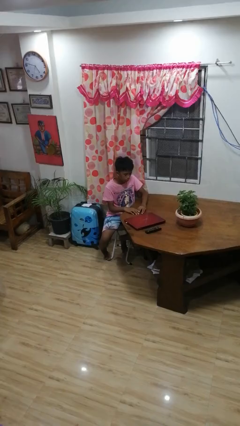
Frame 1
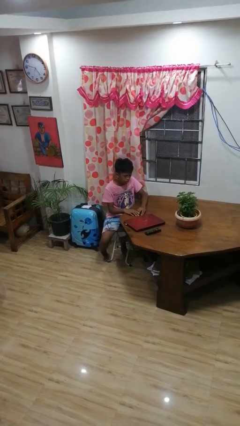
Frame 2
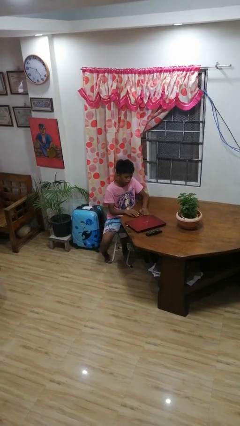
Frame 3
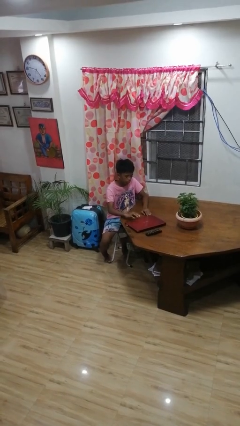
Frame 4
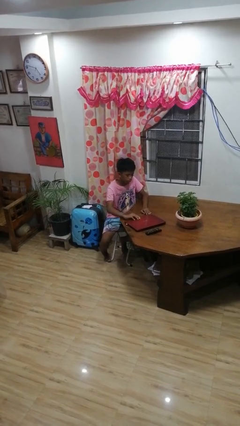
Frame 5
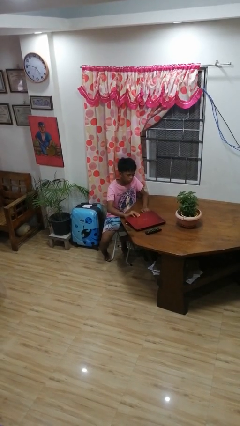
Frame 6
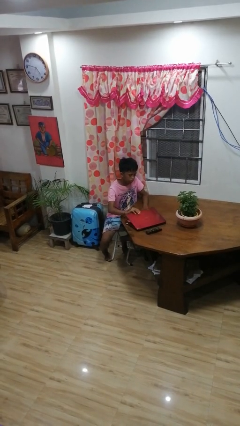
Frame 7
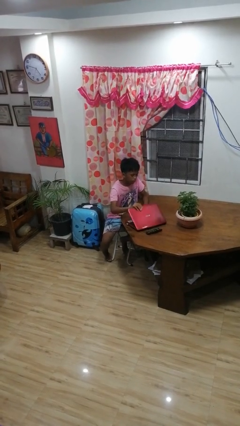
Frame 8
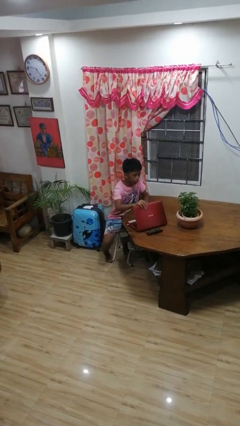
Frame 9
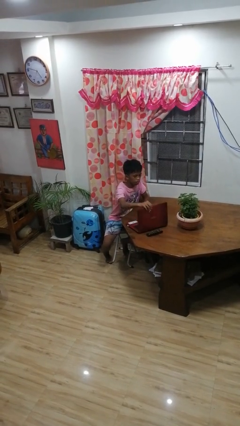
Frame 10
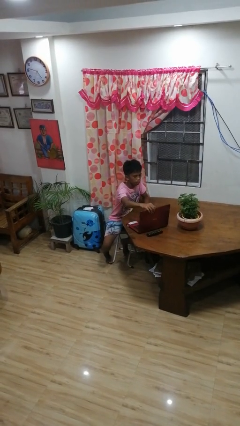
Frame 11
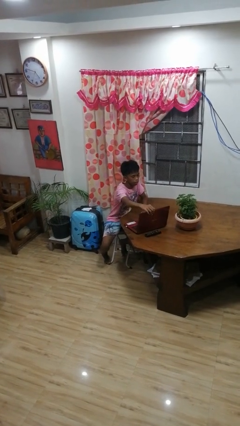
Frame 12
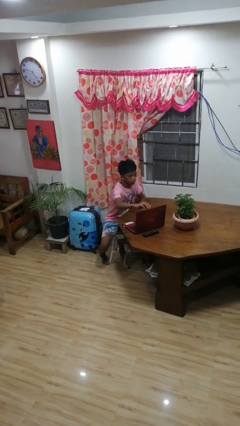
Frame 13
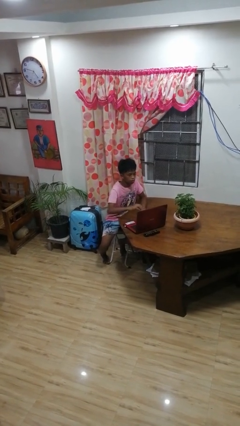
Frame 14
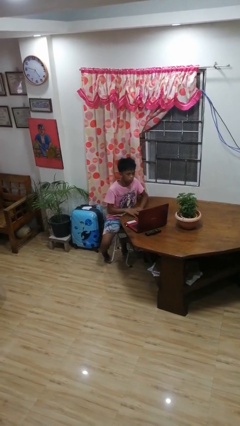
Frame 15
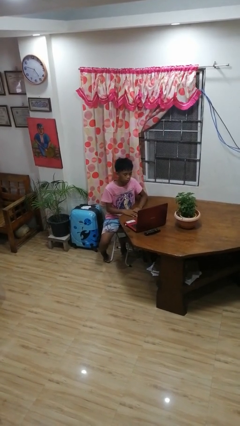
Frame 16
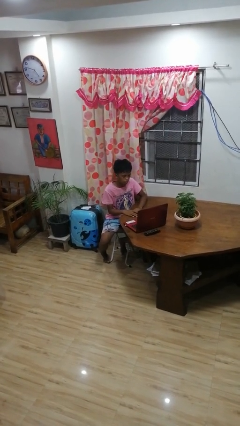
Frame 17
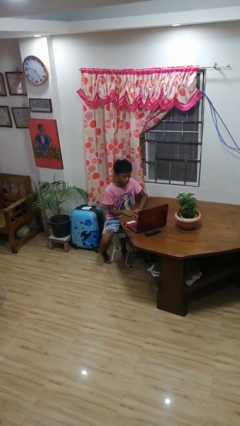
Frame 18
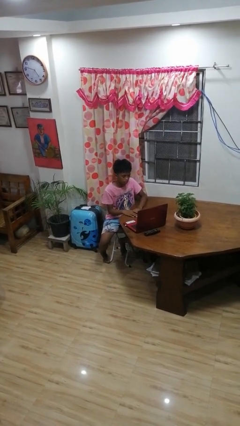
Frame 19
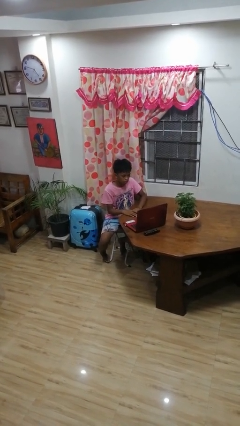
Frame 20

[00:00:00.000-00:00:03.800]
person opens laptop

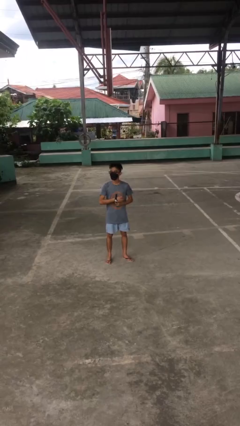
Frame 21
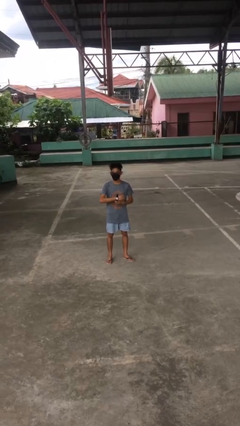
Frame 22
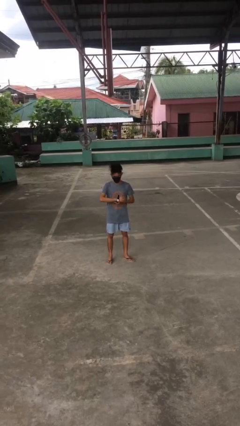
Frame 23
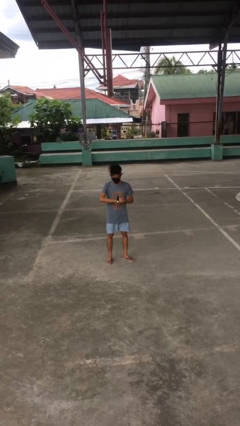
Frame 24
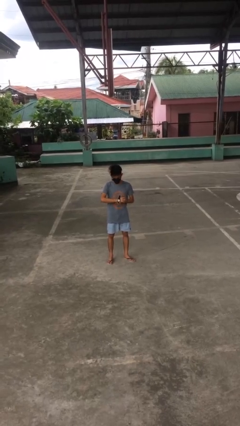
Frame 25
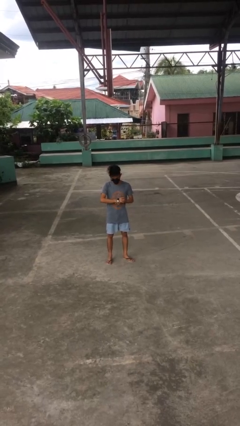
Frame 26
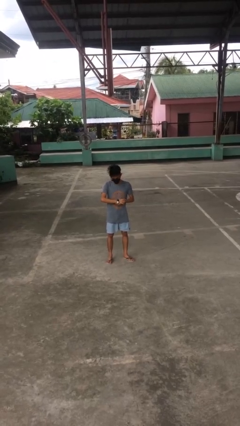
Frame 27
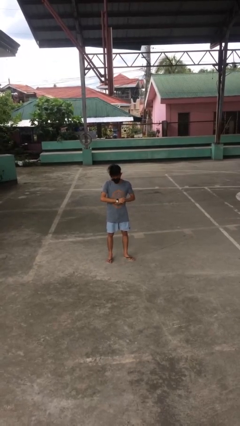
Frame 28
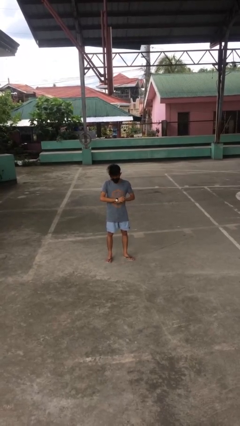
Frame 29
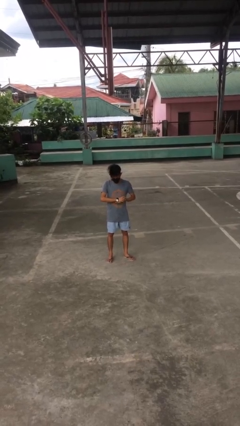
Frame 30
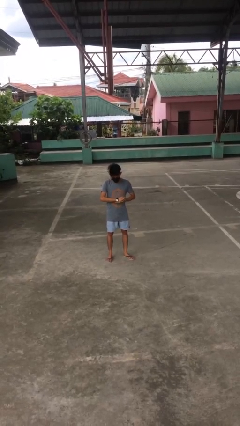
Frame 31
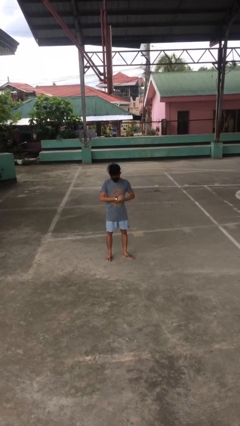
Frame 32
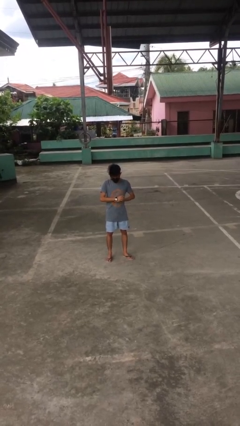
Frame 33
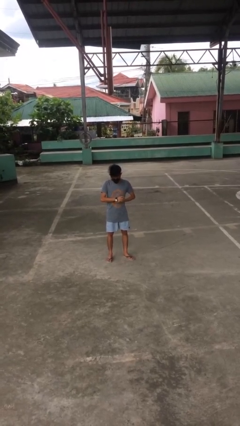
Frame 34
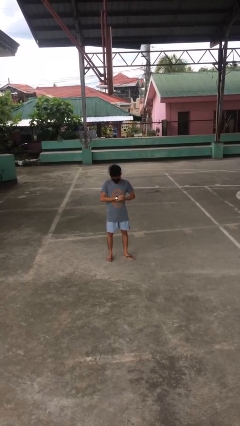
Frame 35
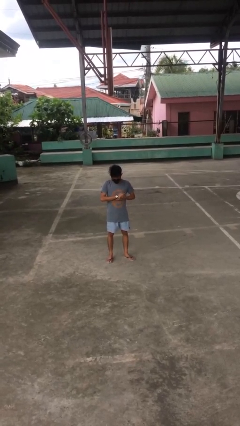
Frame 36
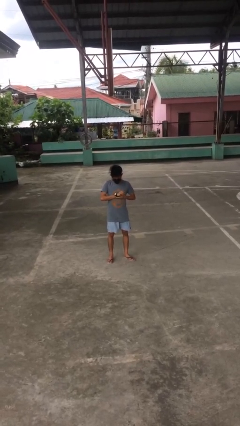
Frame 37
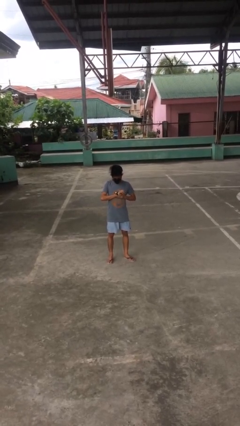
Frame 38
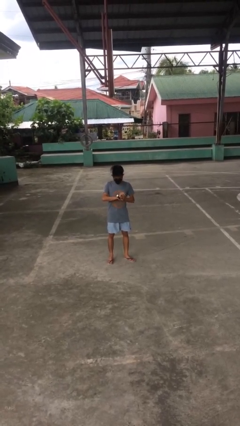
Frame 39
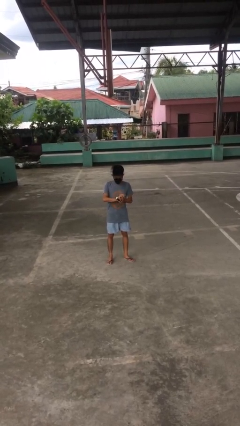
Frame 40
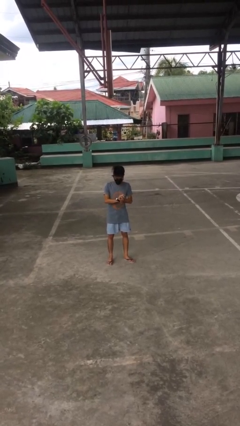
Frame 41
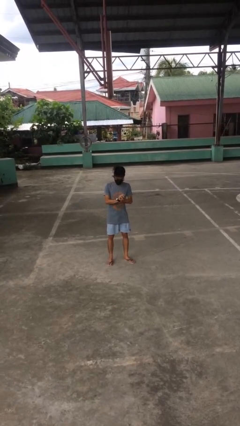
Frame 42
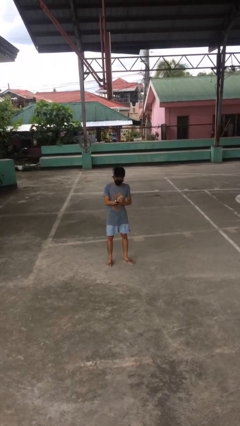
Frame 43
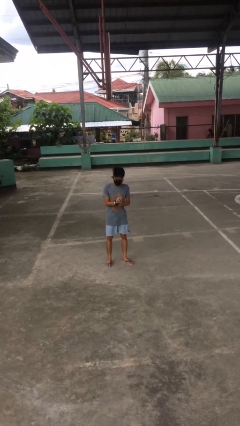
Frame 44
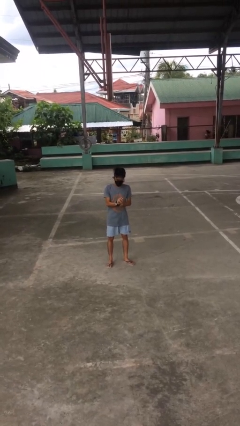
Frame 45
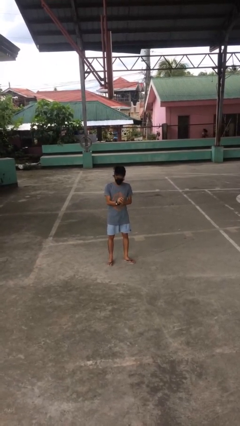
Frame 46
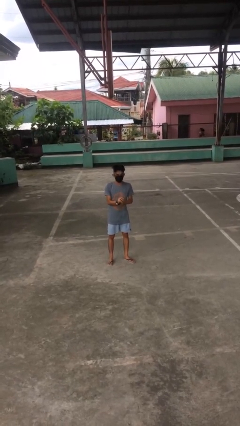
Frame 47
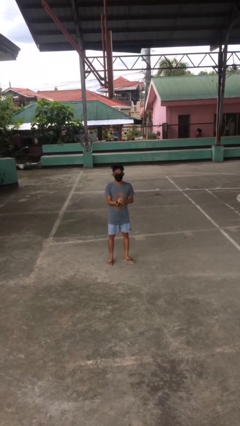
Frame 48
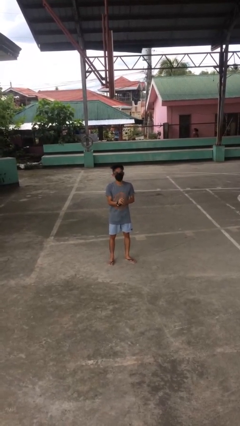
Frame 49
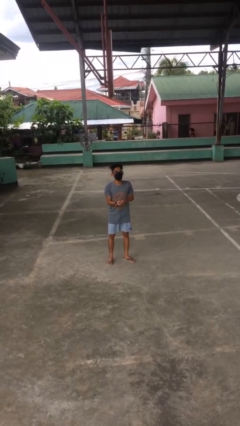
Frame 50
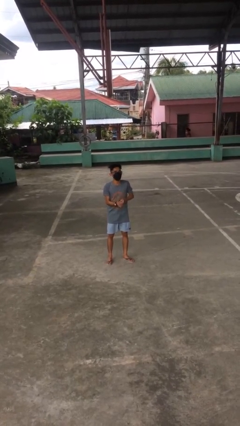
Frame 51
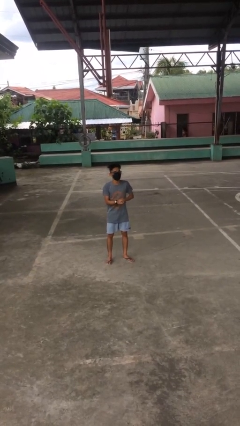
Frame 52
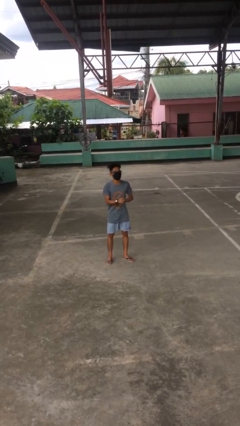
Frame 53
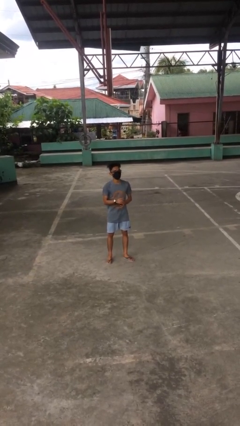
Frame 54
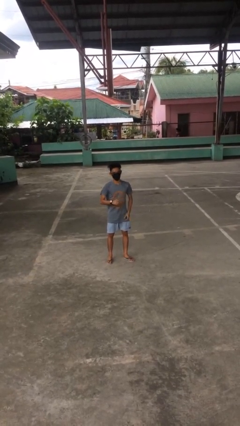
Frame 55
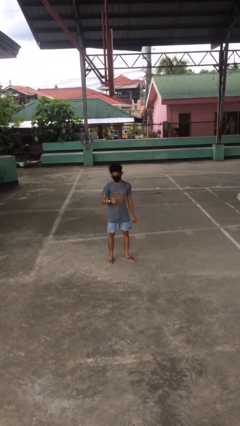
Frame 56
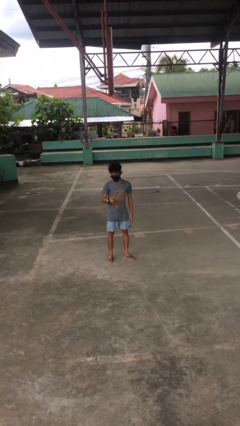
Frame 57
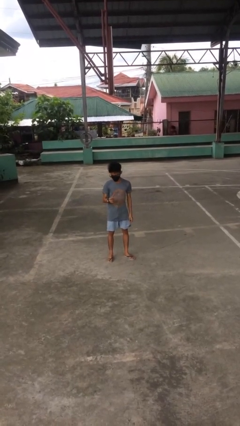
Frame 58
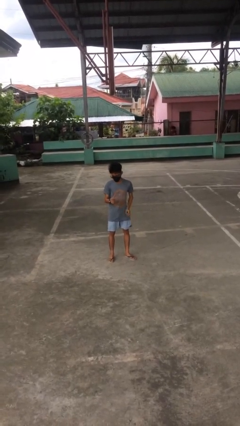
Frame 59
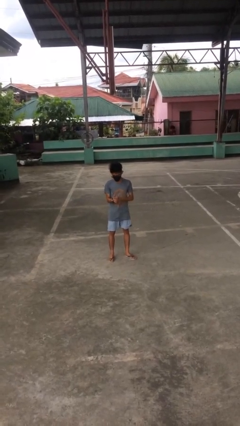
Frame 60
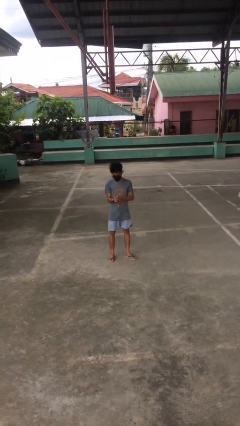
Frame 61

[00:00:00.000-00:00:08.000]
person puts on wristwatch

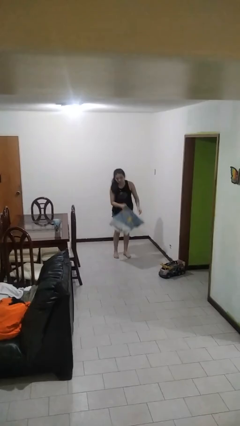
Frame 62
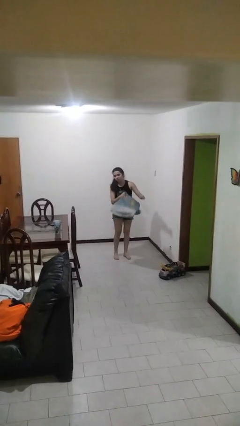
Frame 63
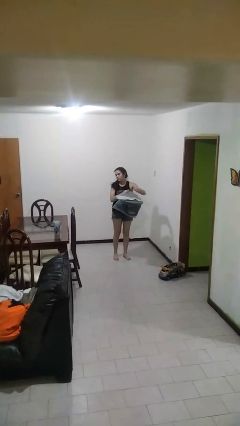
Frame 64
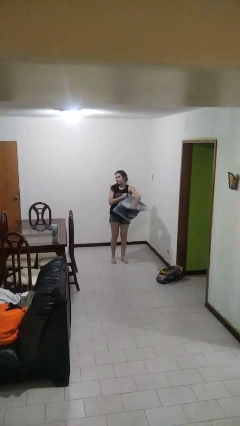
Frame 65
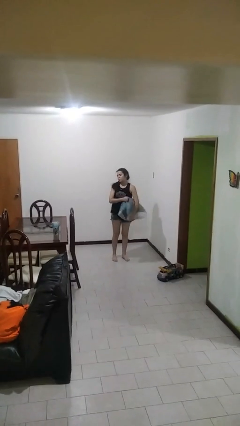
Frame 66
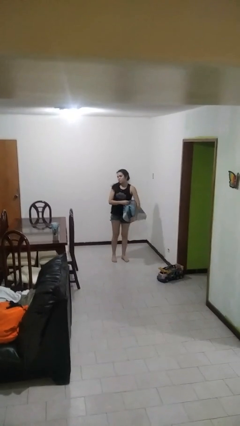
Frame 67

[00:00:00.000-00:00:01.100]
person picks up object from floor

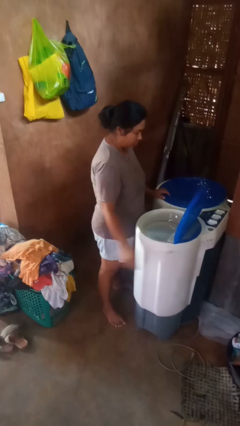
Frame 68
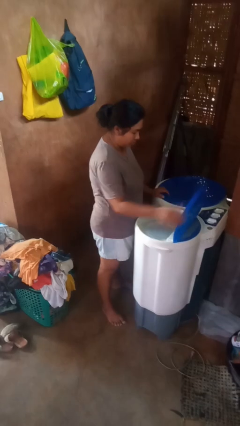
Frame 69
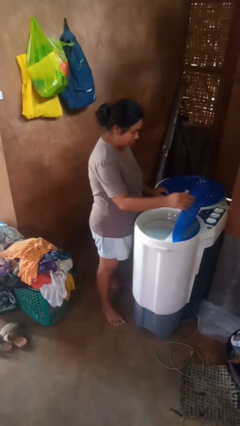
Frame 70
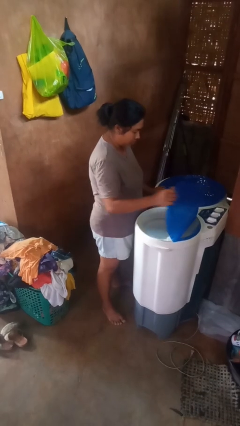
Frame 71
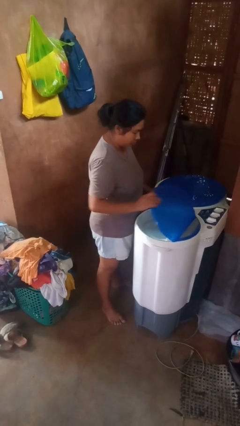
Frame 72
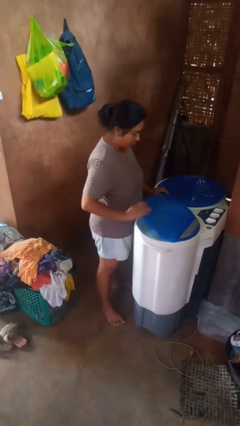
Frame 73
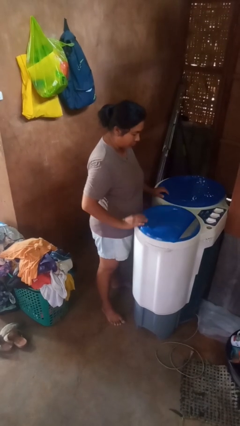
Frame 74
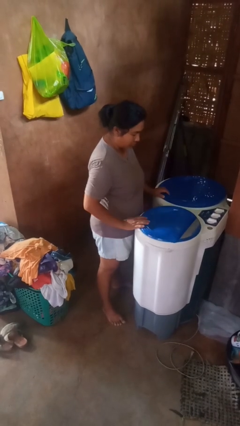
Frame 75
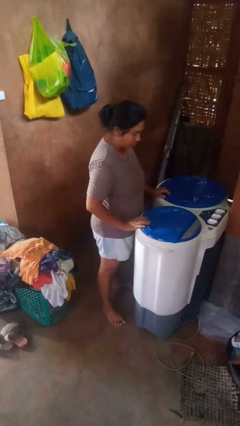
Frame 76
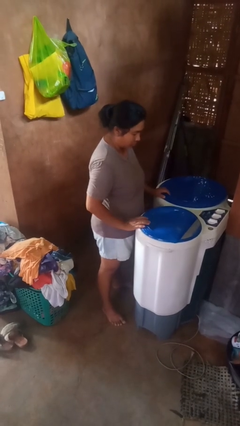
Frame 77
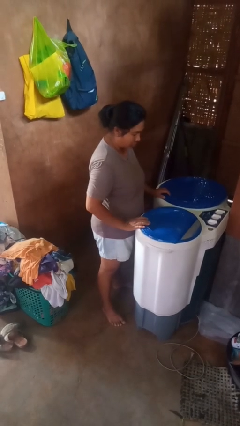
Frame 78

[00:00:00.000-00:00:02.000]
person closes clothes washer

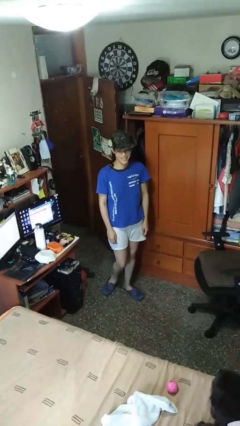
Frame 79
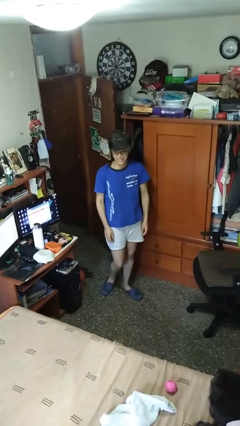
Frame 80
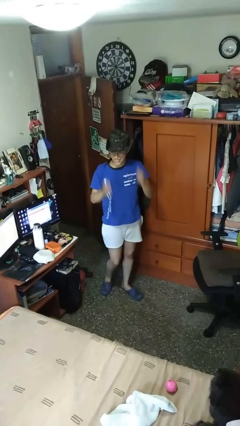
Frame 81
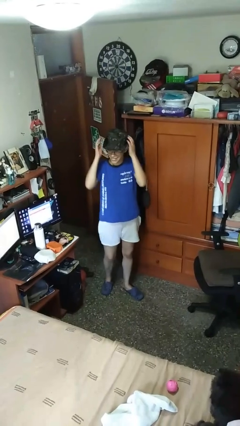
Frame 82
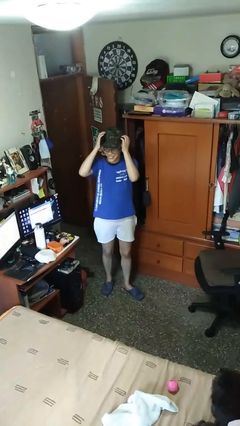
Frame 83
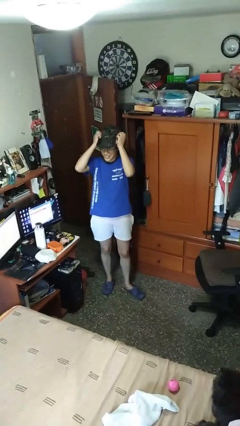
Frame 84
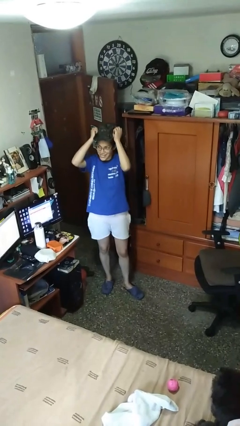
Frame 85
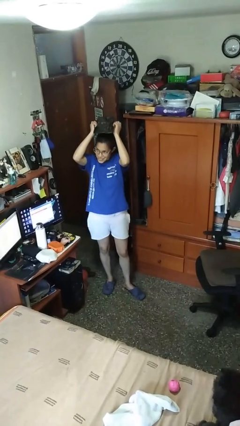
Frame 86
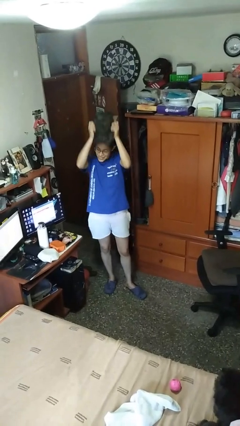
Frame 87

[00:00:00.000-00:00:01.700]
person takes off hat

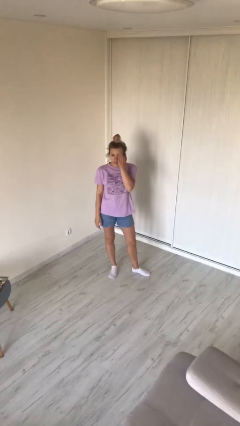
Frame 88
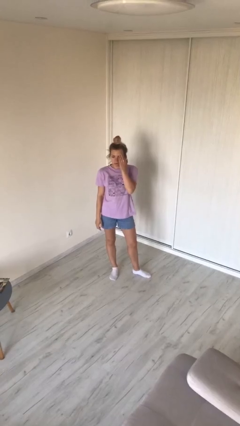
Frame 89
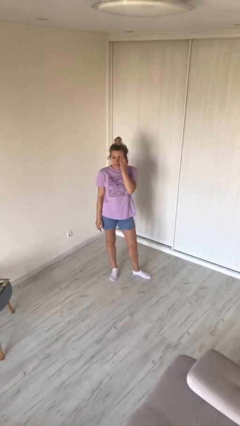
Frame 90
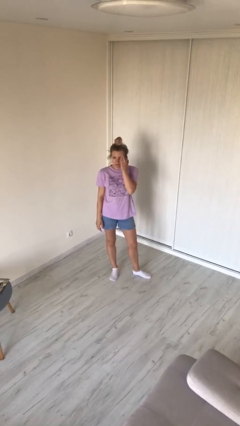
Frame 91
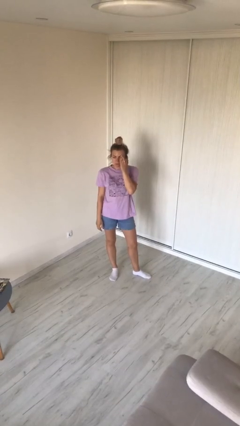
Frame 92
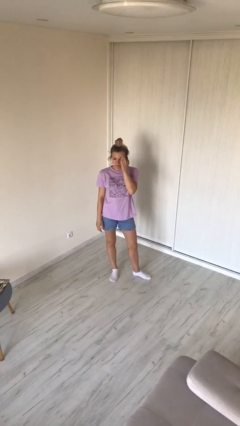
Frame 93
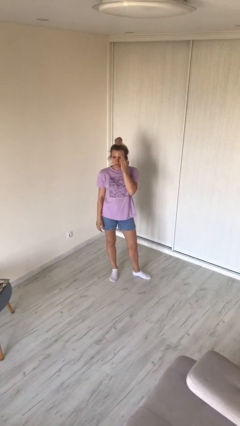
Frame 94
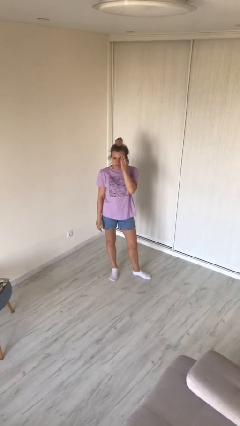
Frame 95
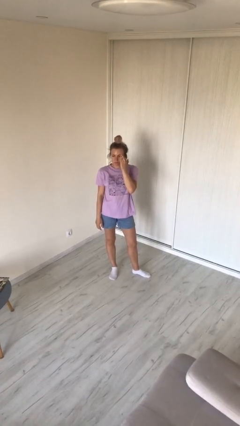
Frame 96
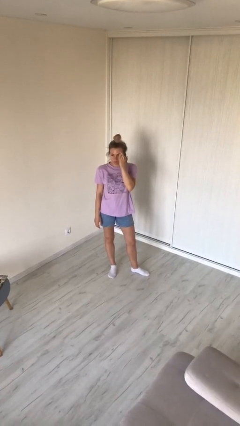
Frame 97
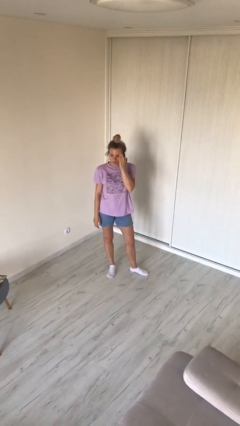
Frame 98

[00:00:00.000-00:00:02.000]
person scratches face
